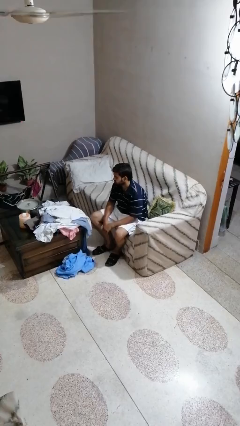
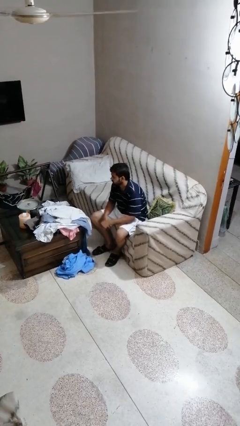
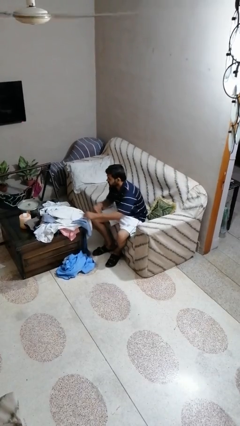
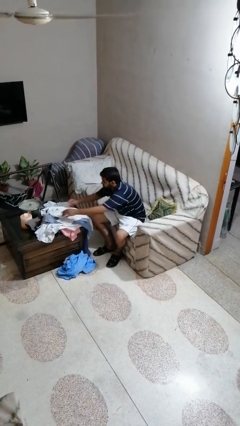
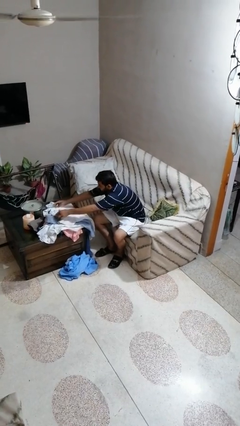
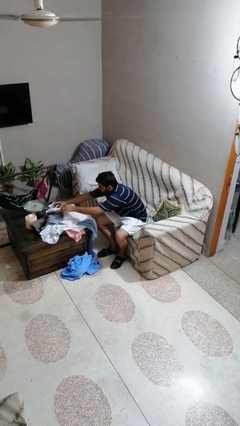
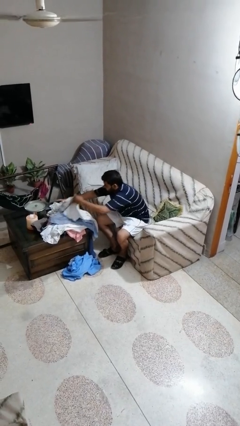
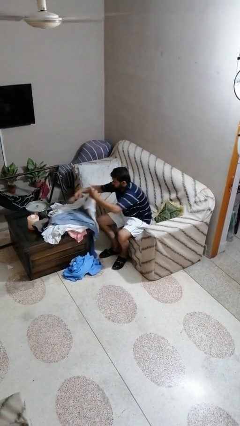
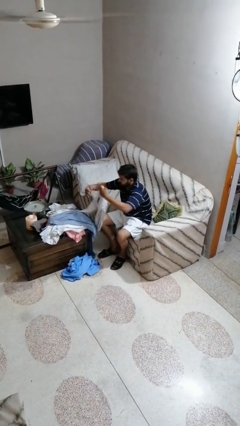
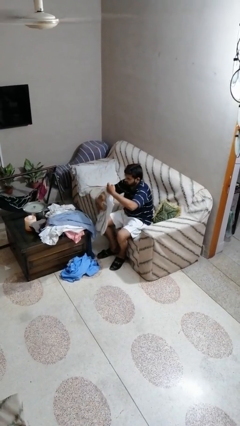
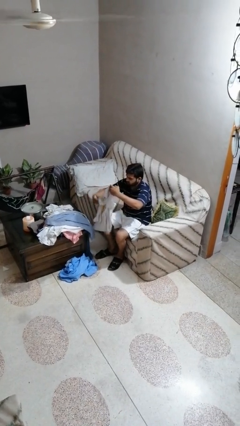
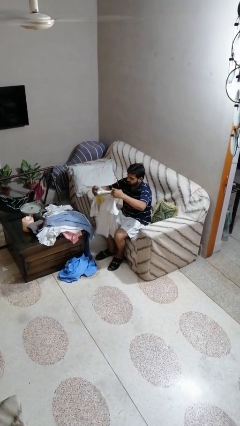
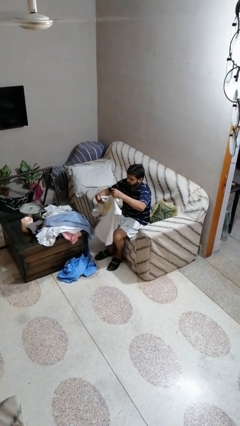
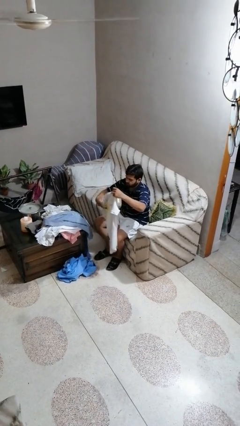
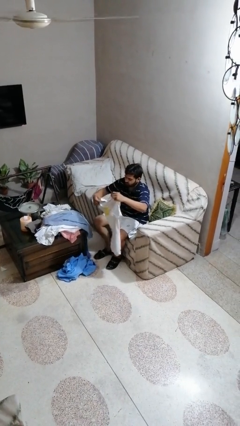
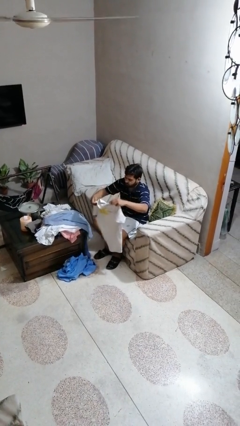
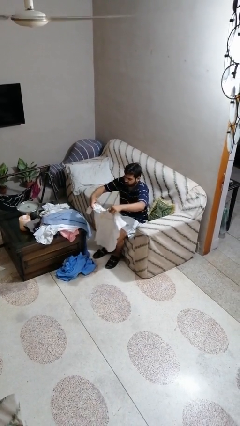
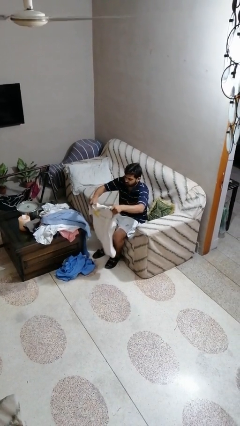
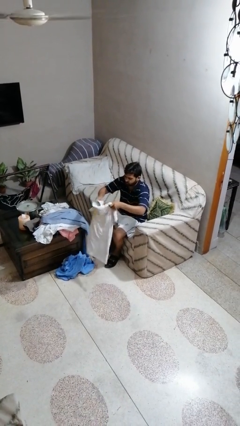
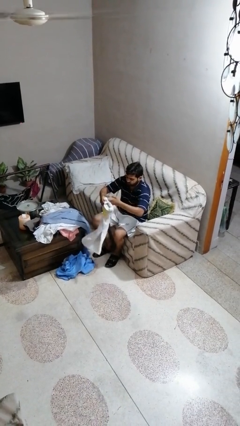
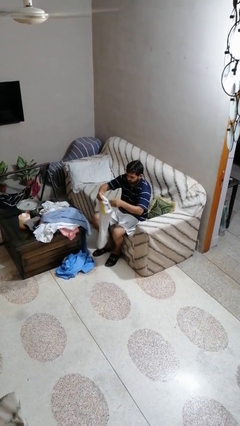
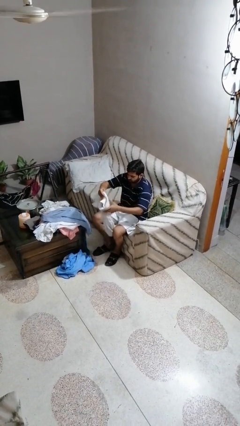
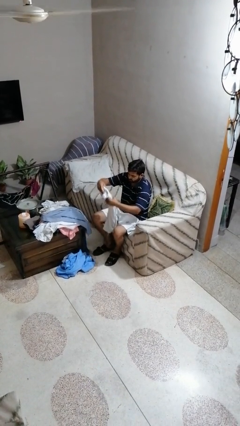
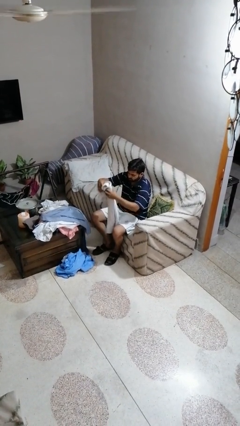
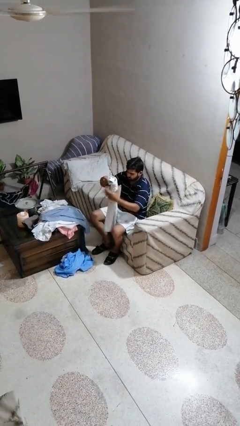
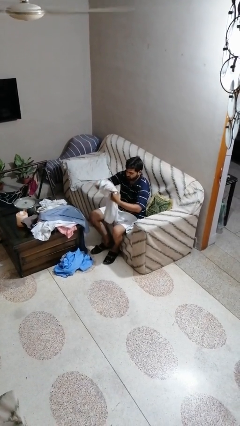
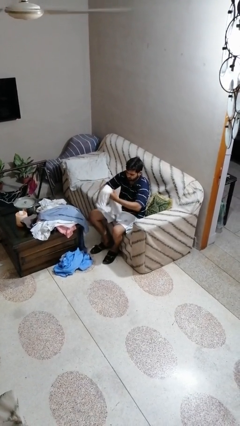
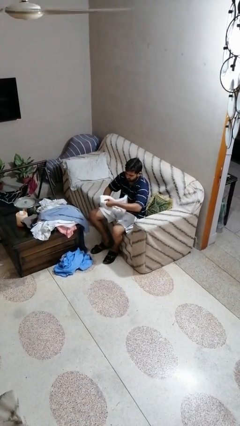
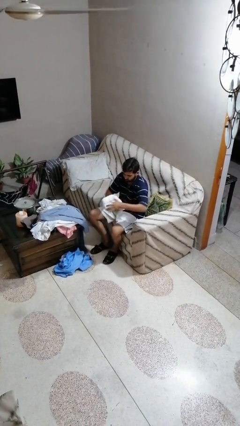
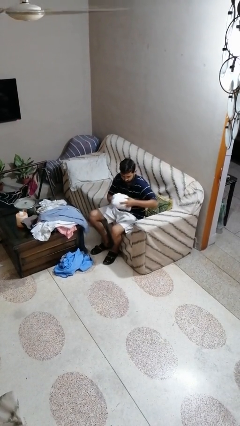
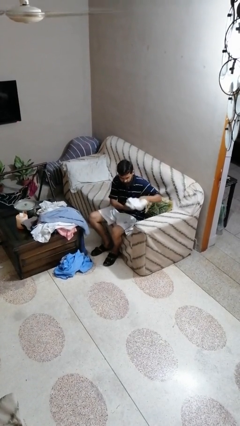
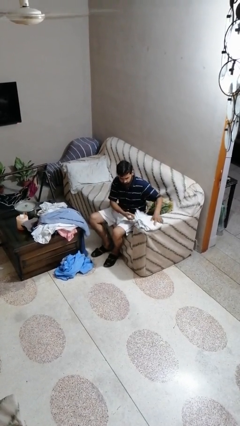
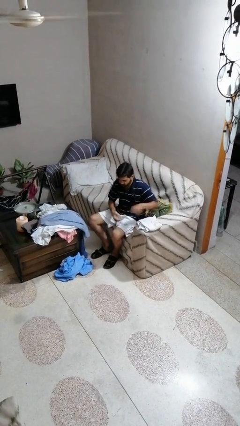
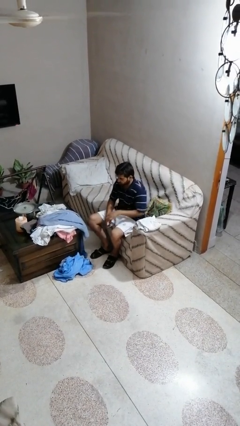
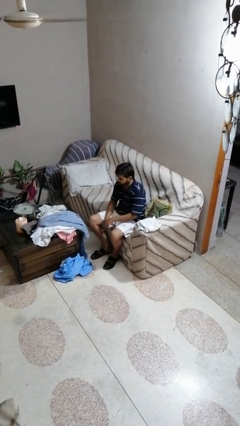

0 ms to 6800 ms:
person folds shirt

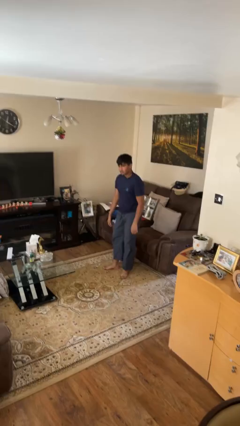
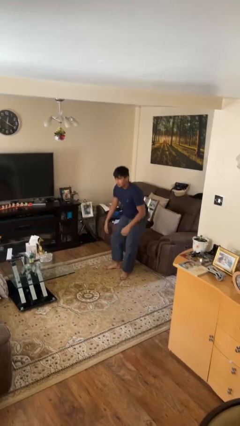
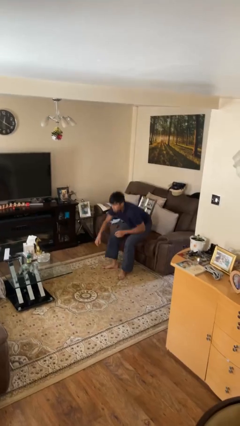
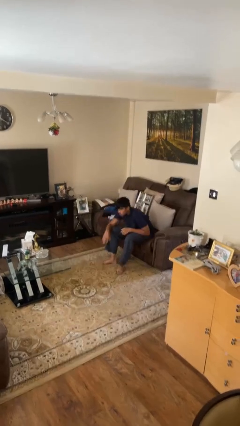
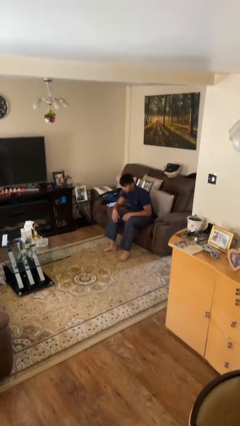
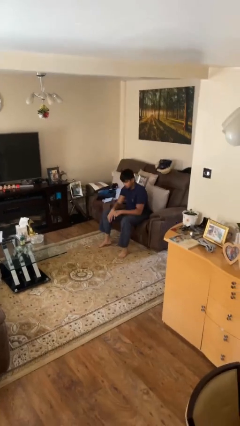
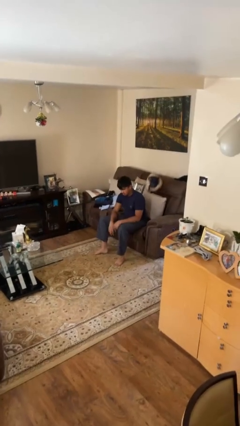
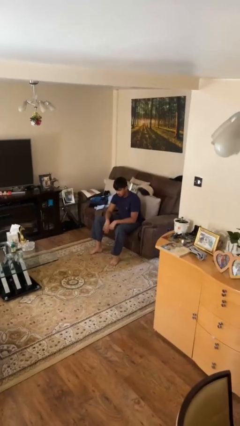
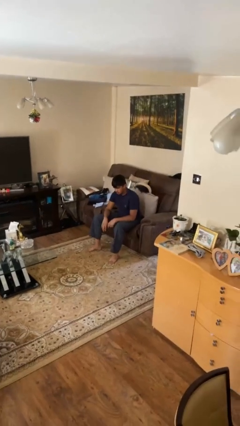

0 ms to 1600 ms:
person sits down

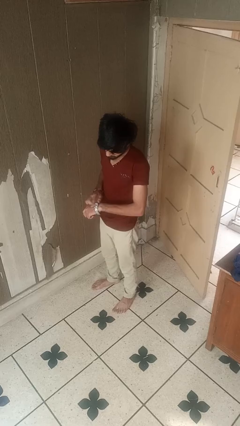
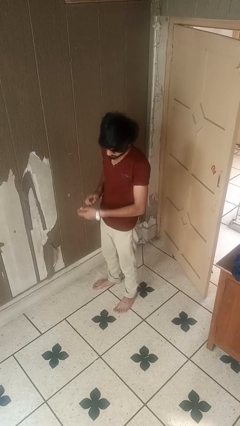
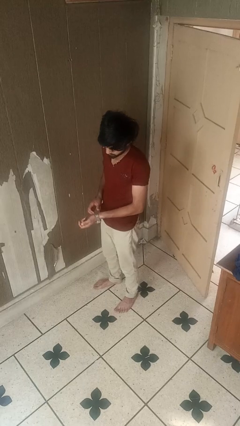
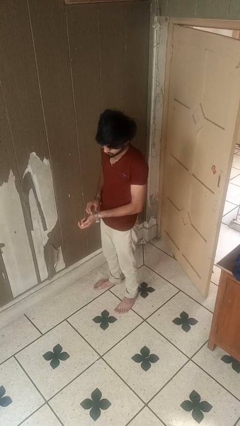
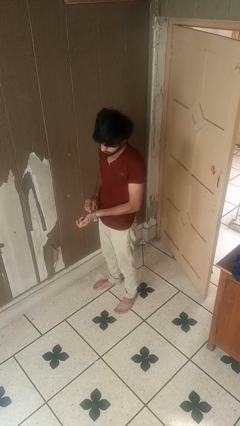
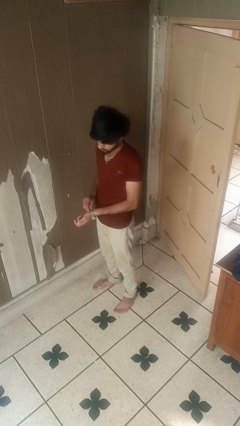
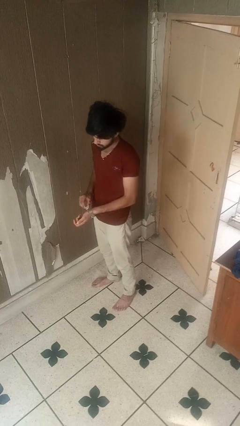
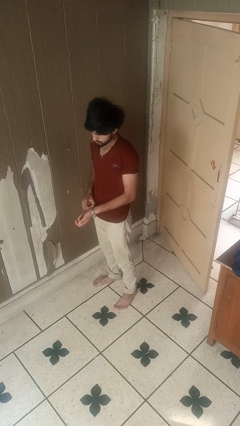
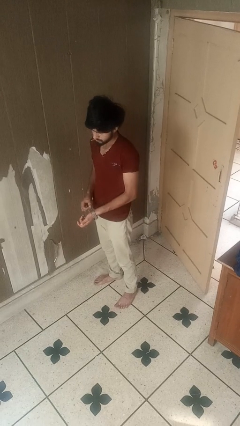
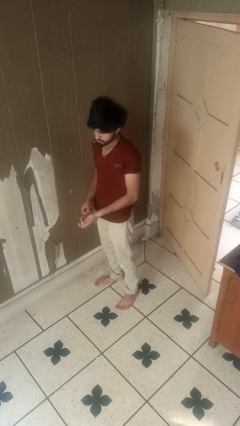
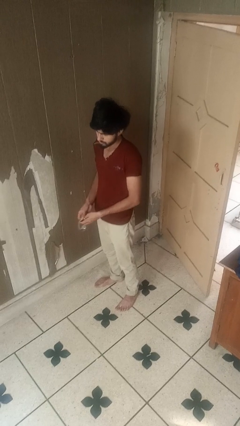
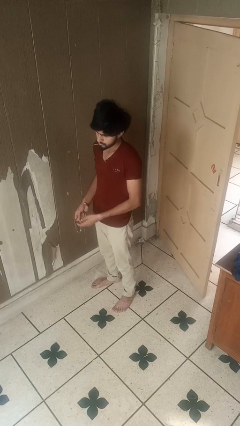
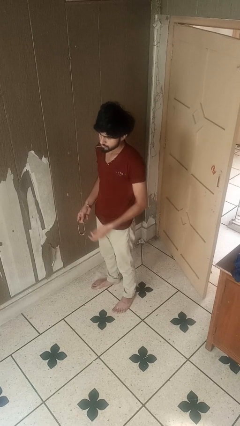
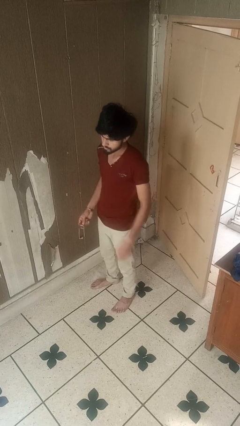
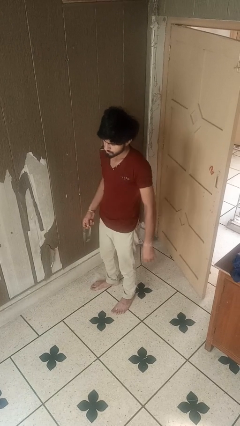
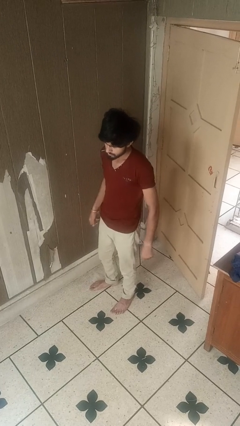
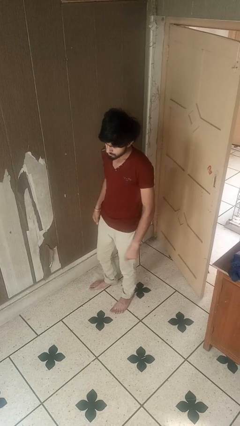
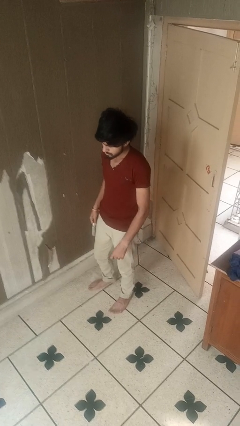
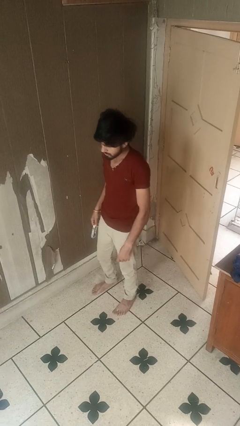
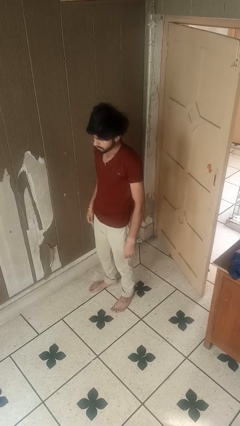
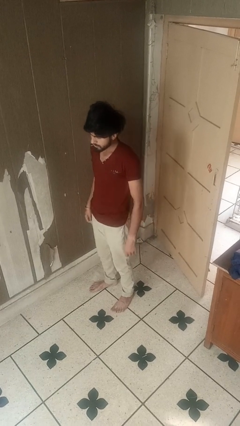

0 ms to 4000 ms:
person takes off wristwatch

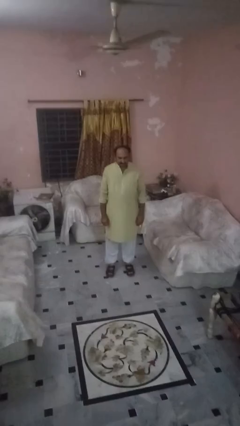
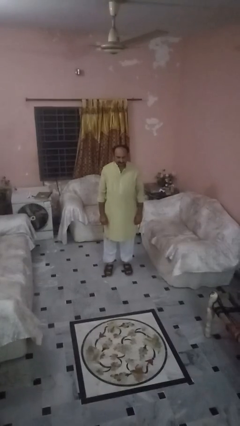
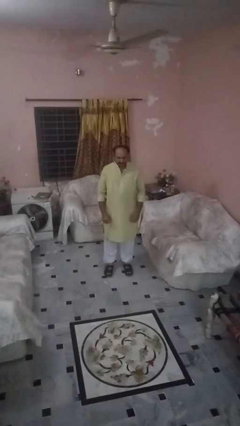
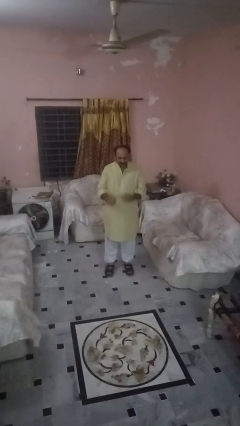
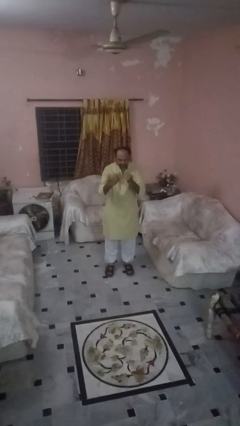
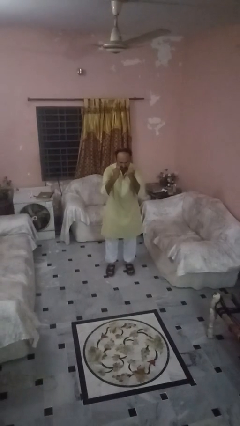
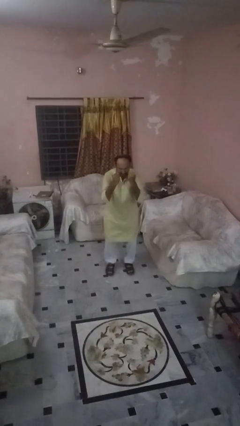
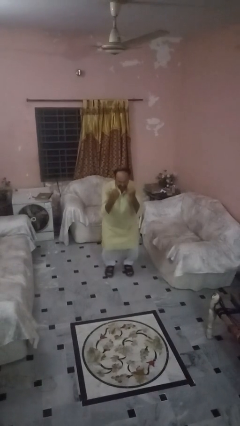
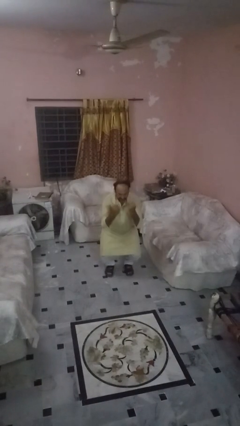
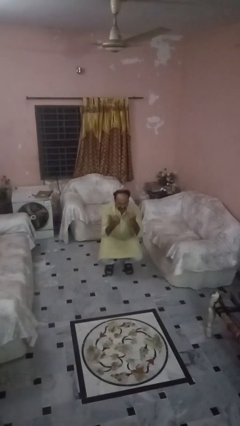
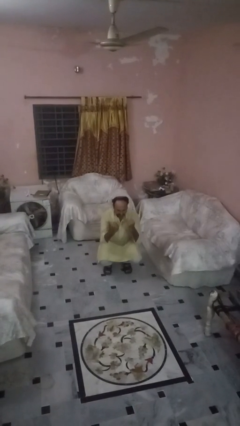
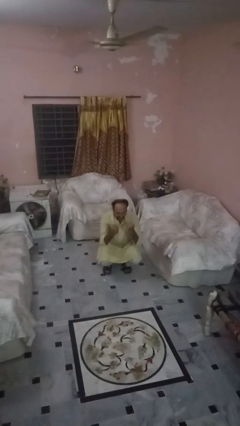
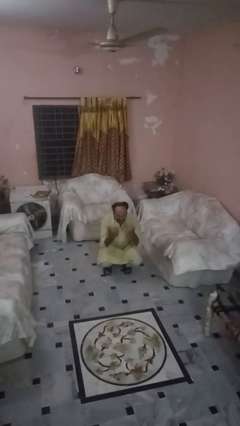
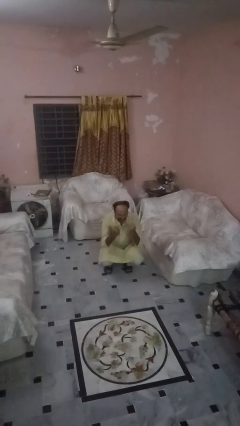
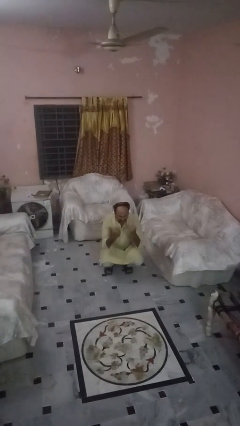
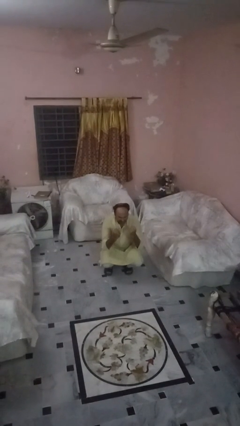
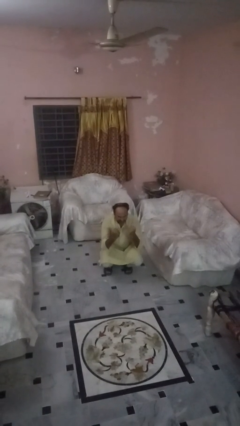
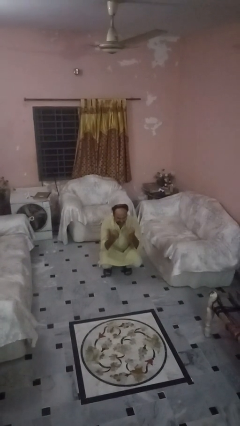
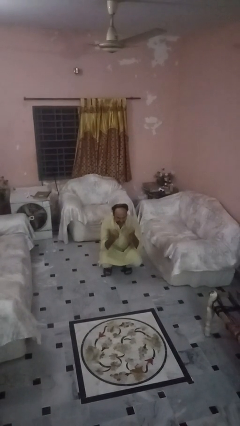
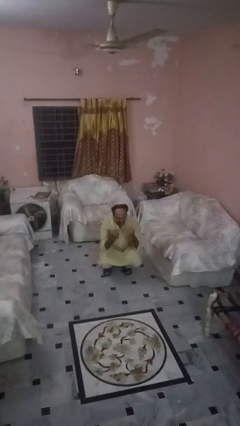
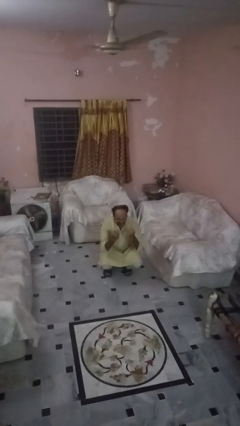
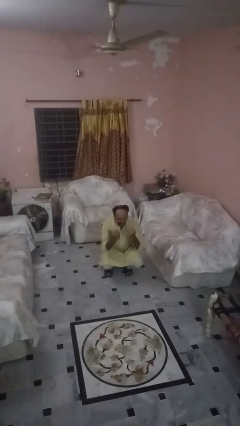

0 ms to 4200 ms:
person squats

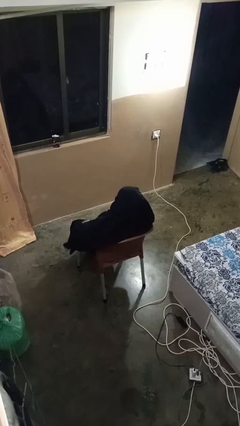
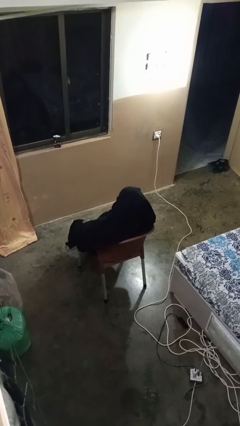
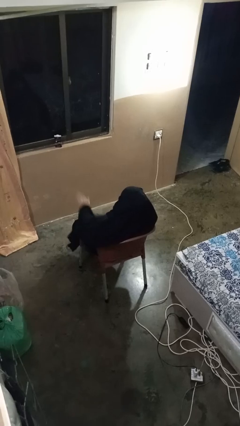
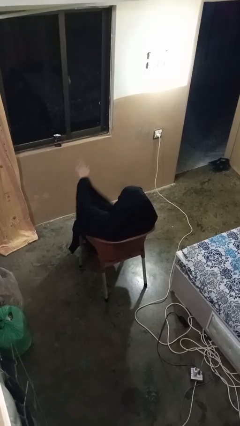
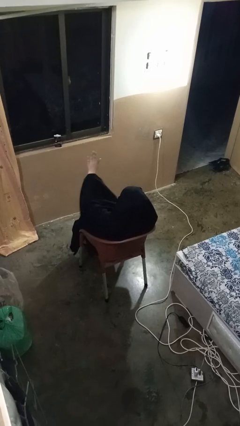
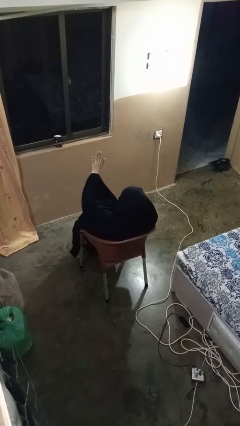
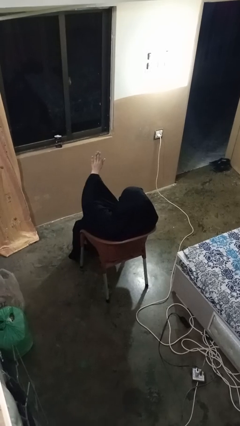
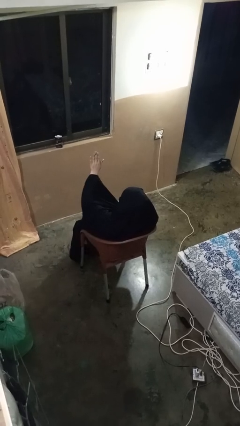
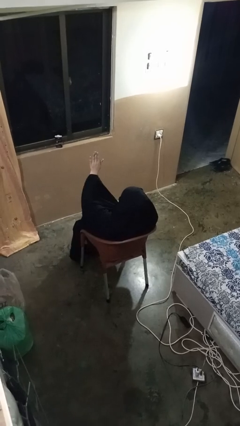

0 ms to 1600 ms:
person gestures raise hand
